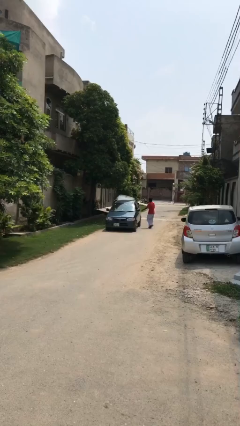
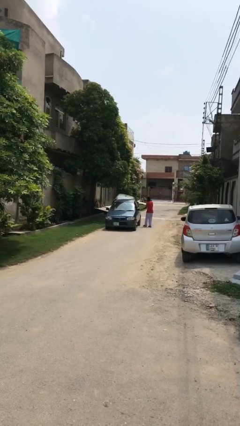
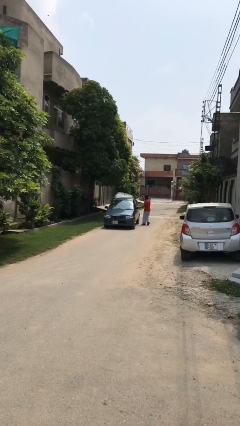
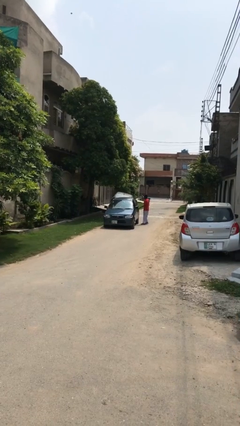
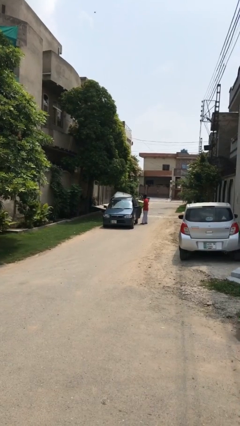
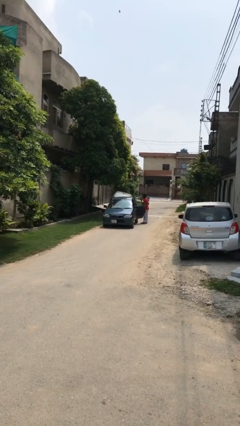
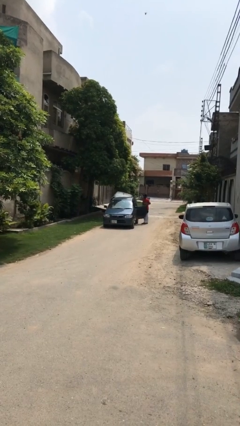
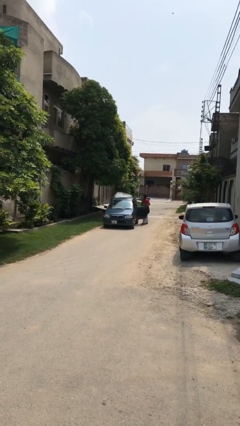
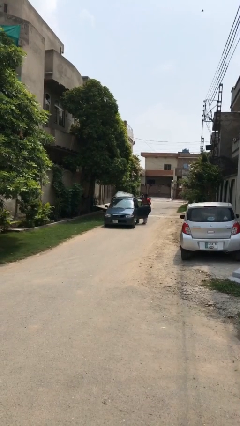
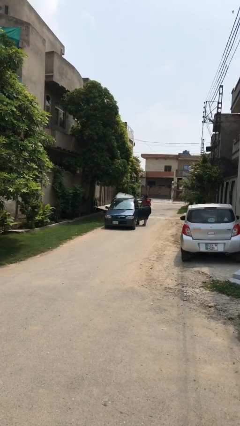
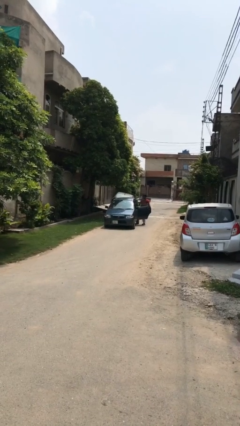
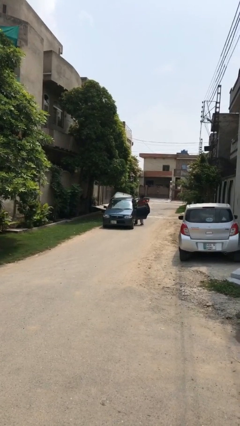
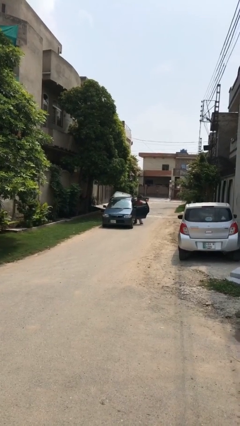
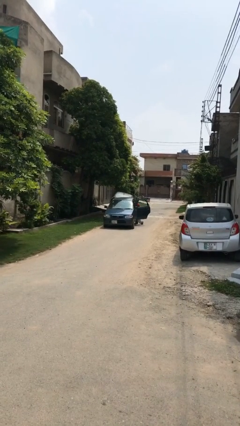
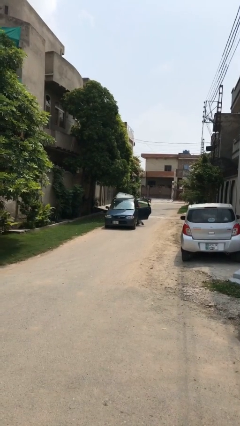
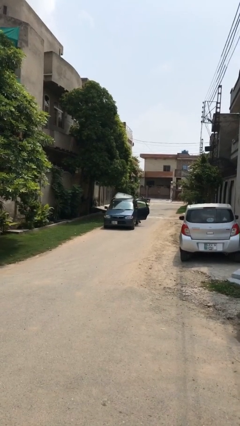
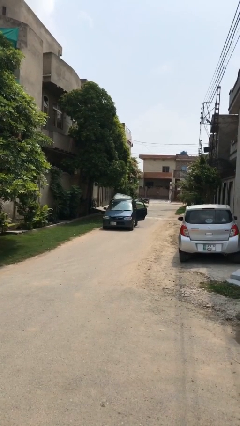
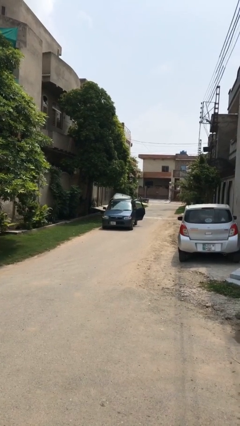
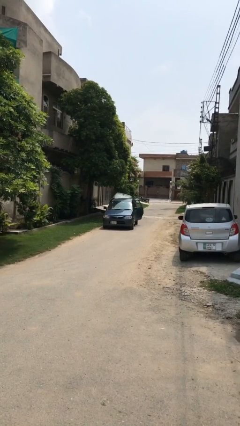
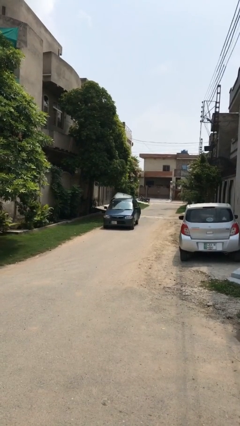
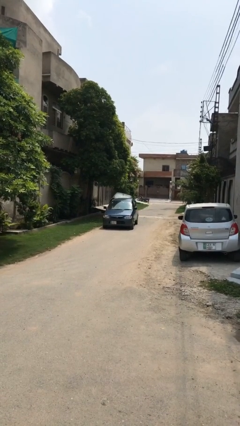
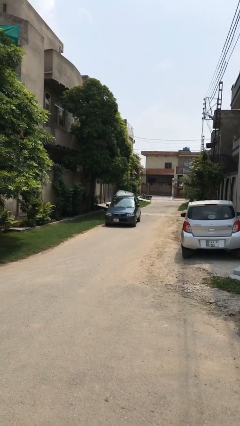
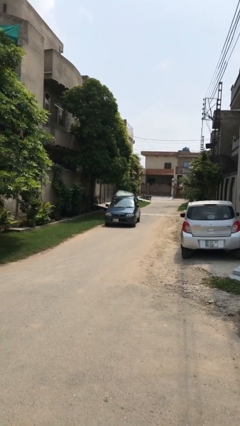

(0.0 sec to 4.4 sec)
car picks up person

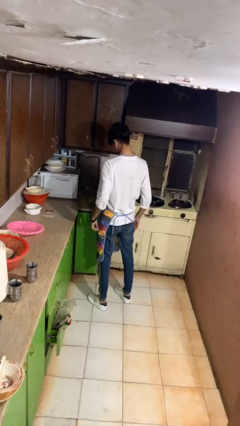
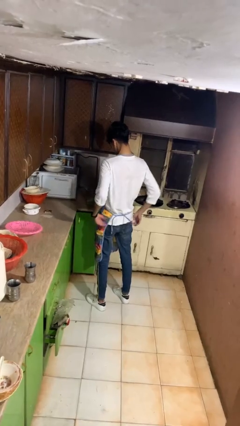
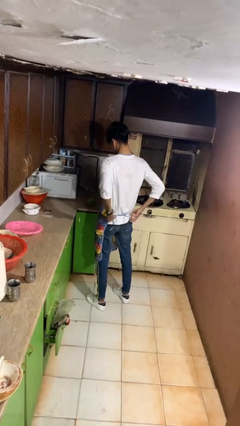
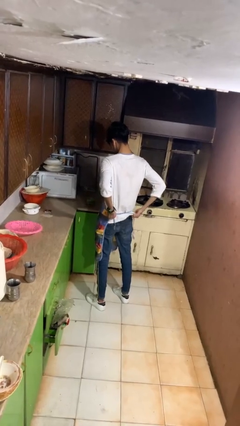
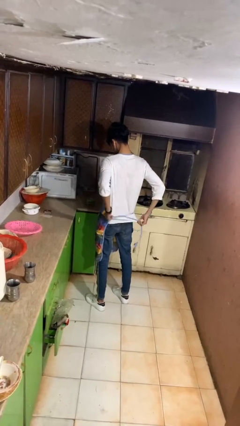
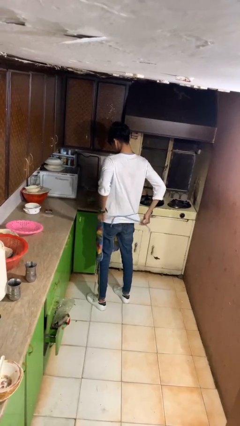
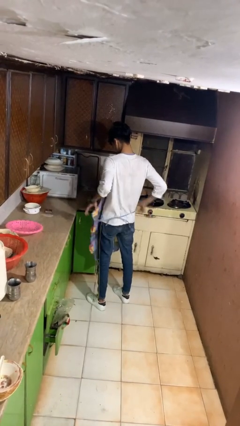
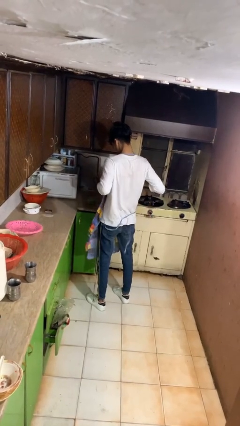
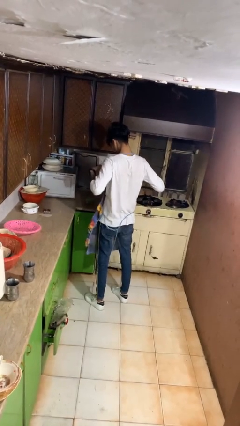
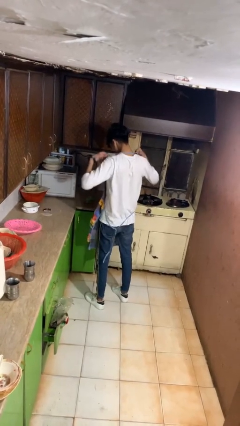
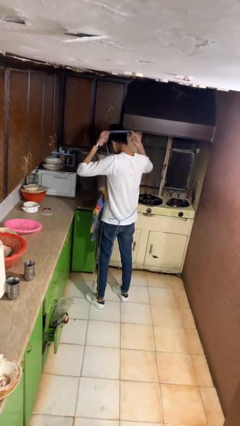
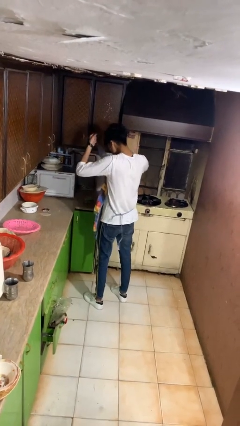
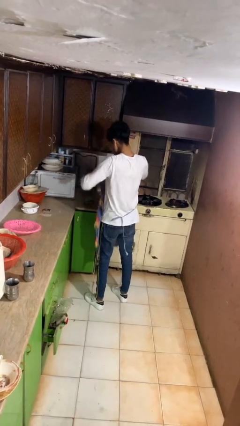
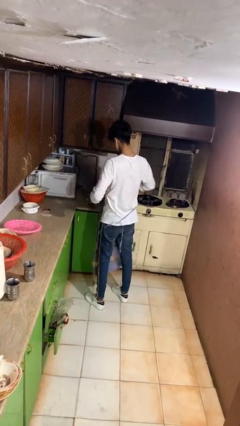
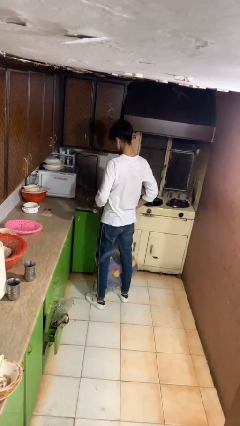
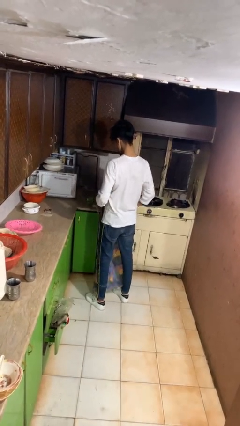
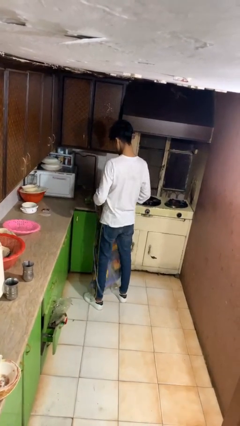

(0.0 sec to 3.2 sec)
person takes off apron

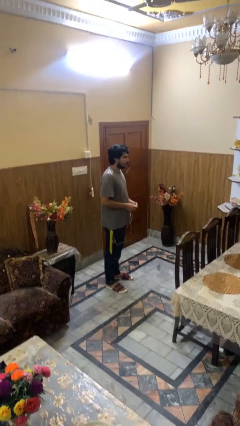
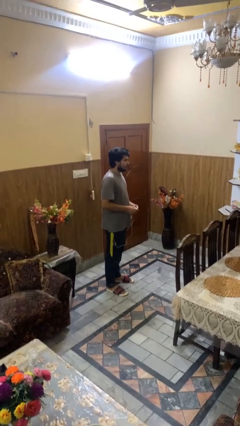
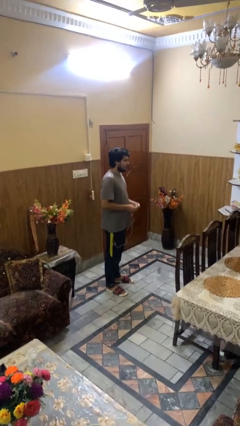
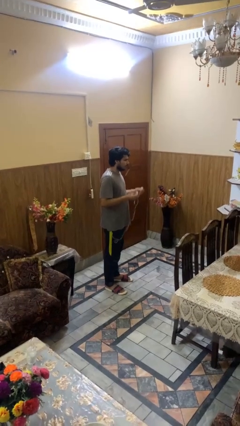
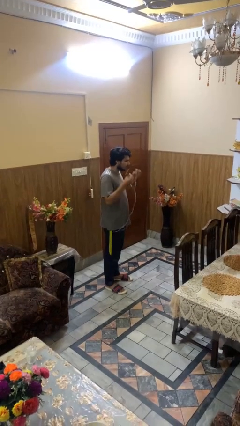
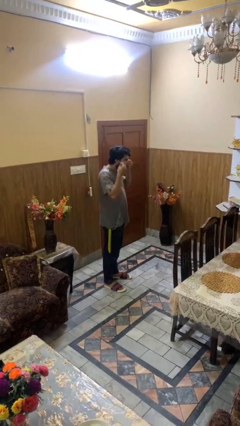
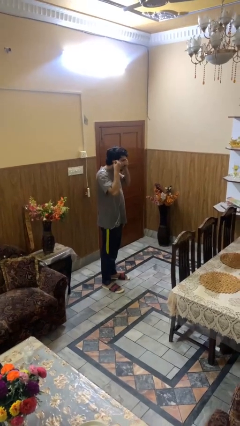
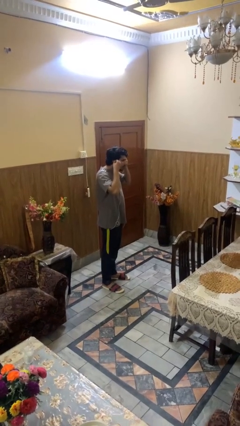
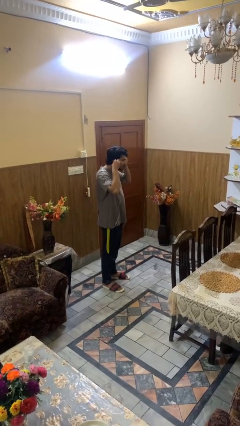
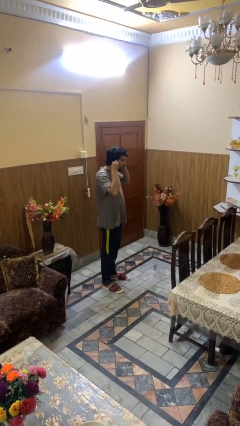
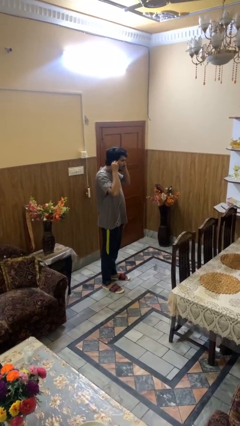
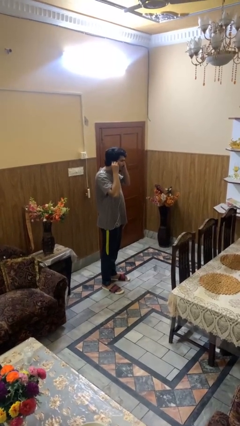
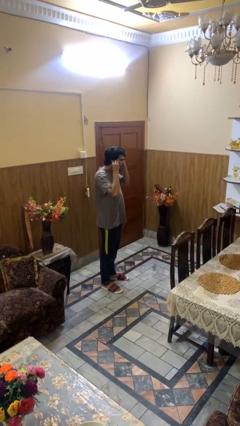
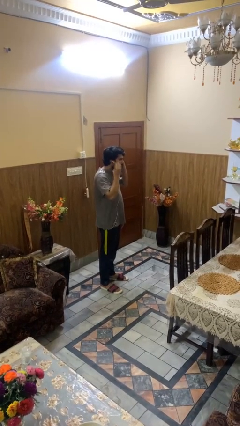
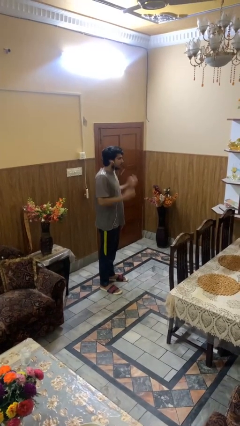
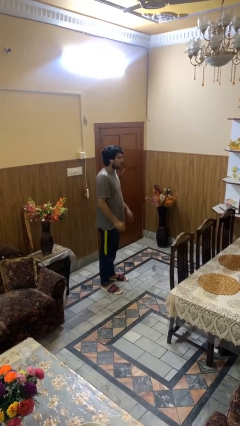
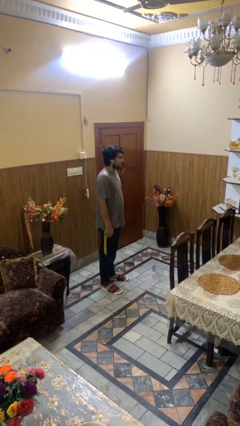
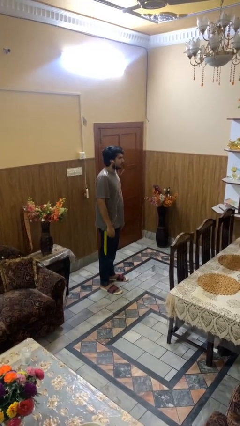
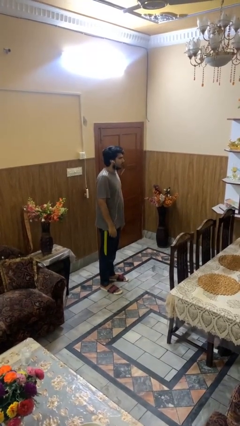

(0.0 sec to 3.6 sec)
person puts on headphones

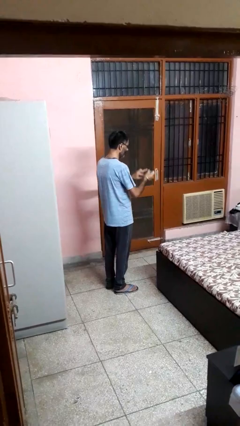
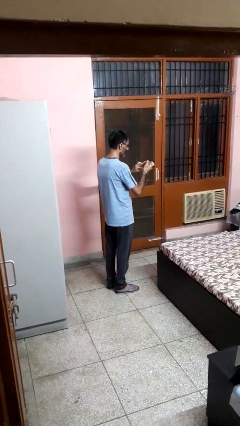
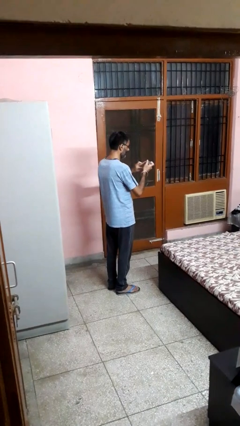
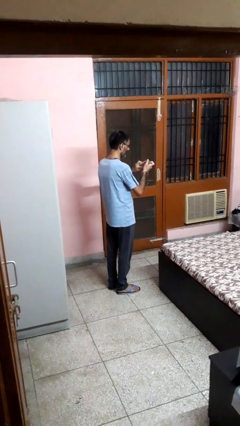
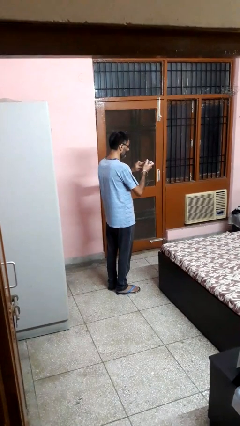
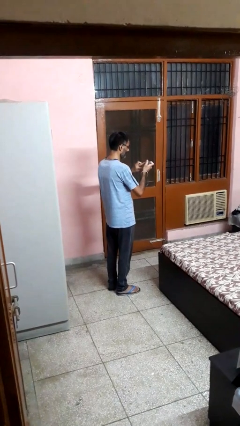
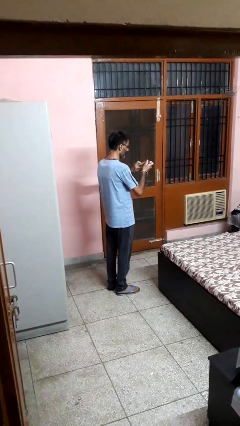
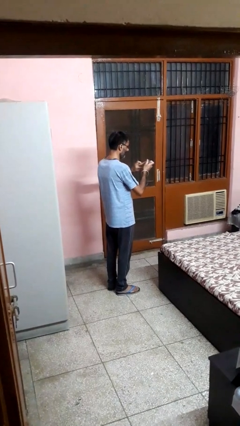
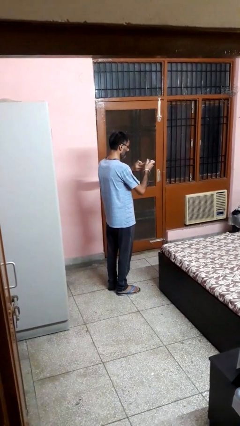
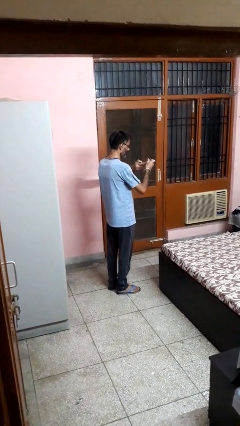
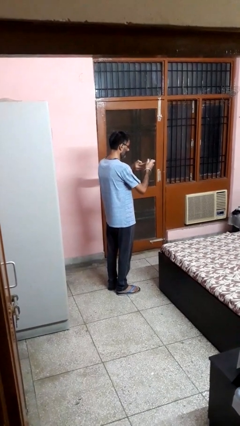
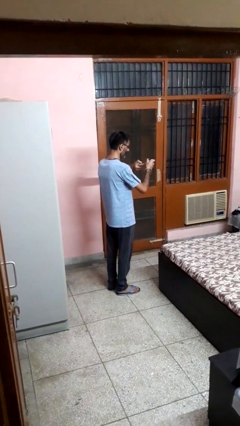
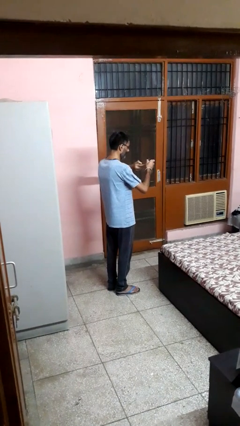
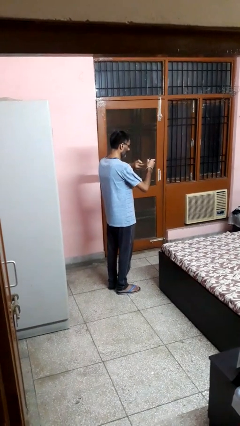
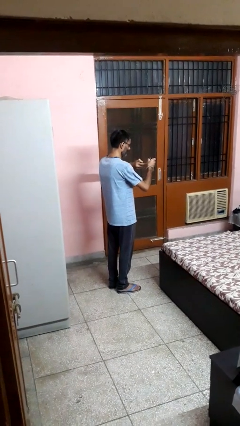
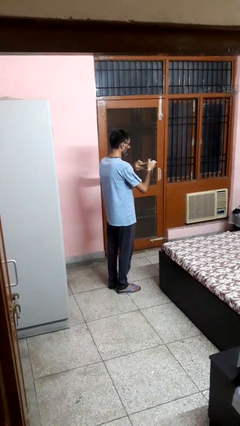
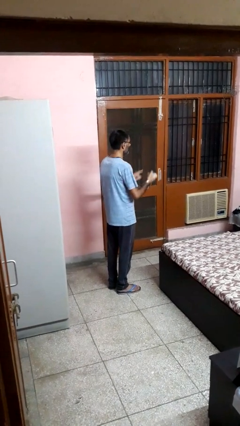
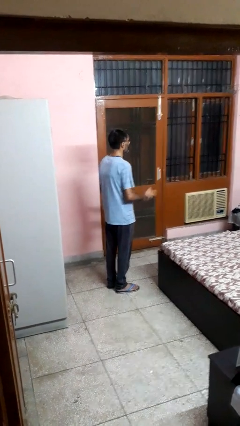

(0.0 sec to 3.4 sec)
person clips fingernails

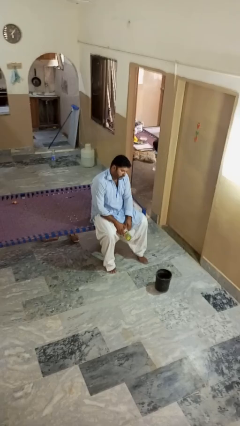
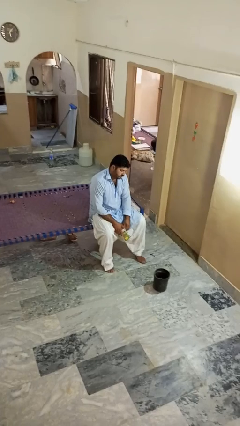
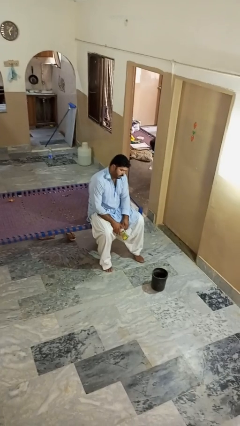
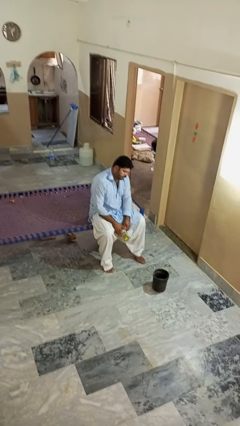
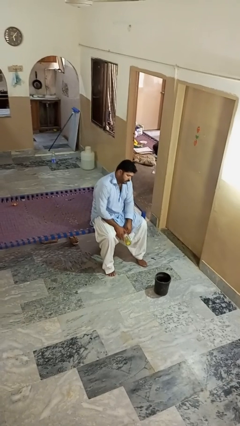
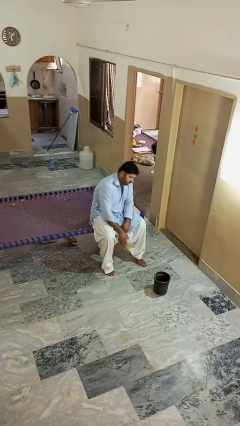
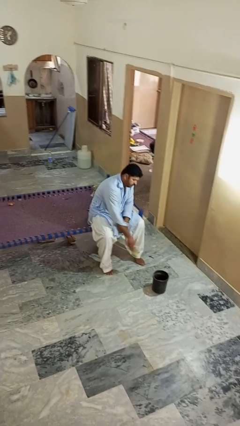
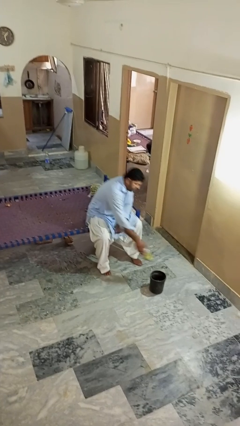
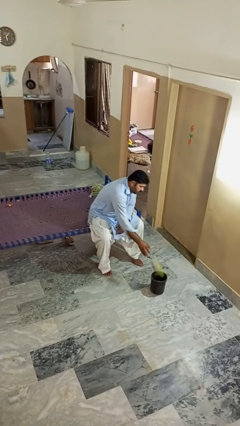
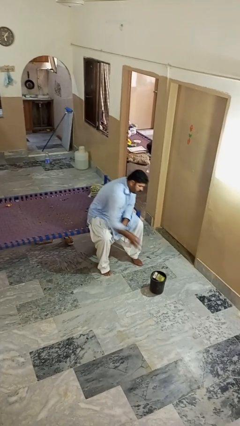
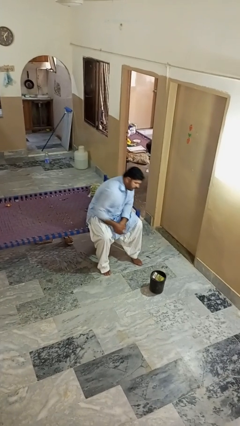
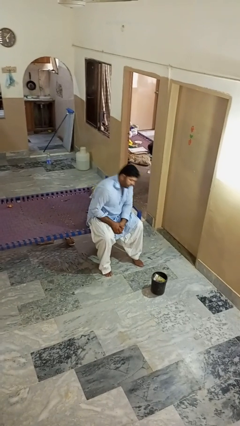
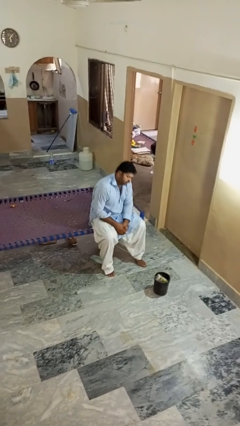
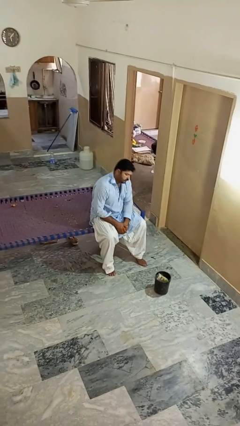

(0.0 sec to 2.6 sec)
person puts object into basket

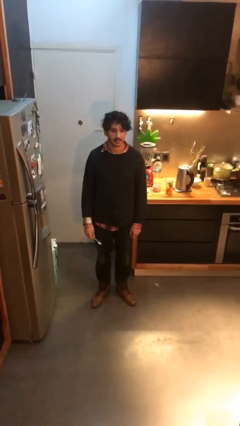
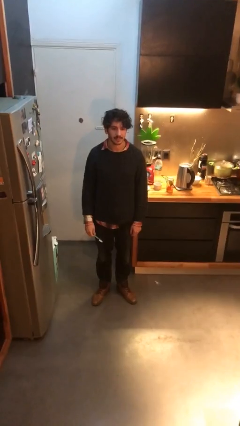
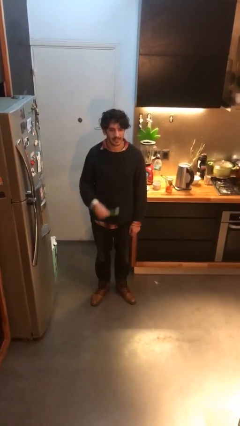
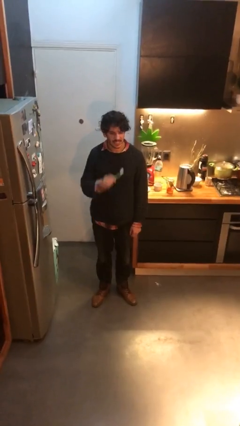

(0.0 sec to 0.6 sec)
person brushes teeth
